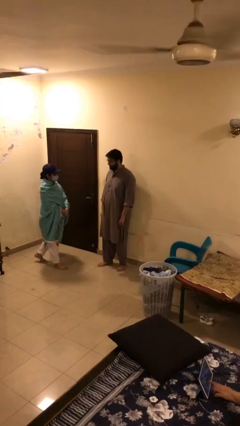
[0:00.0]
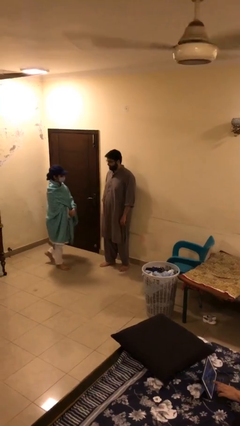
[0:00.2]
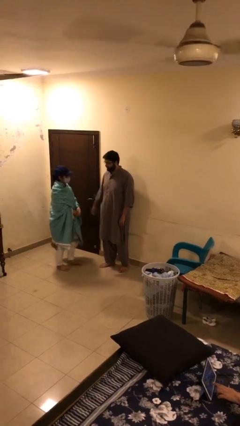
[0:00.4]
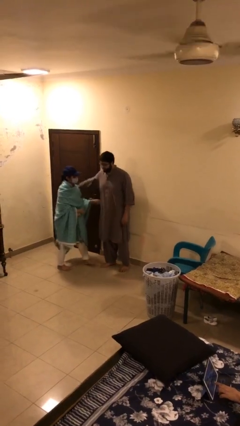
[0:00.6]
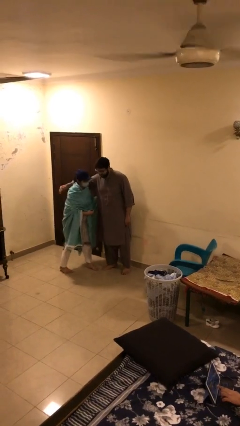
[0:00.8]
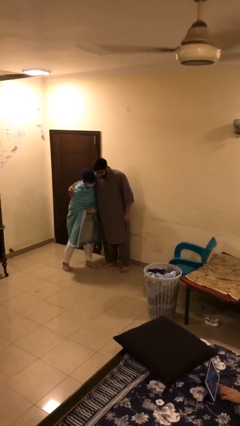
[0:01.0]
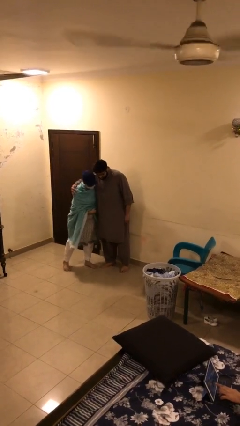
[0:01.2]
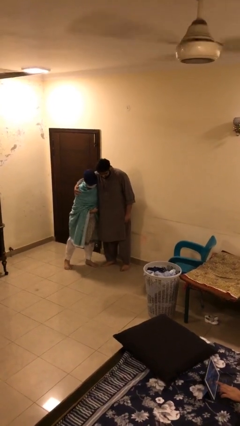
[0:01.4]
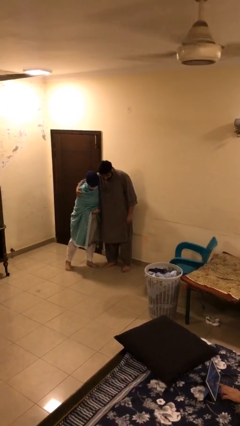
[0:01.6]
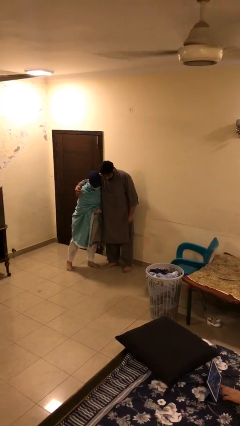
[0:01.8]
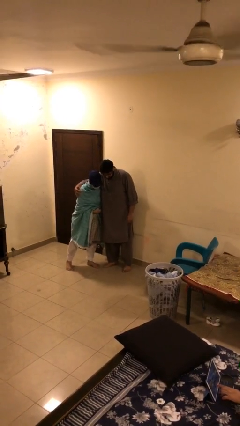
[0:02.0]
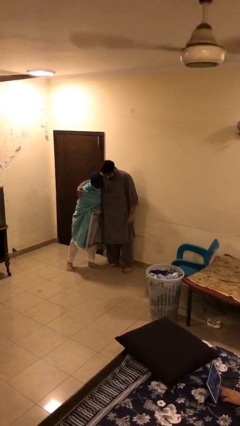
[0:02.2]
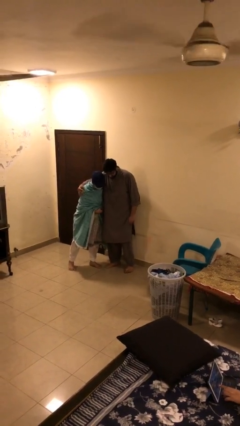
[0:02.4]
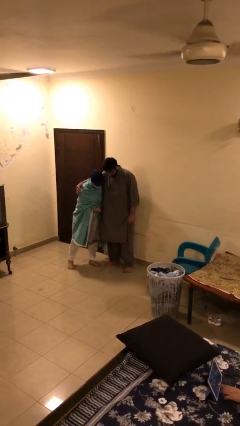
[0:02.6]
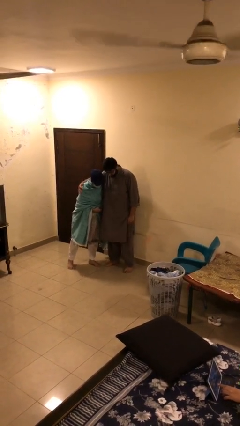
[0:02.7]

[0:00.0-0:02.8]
person embraces person

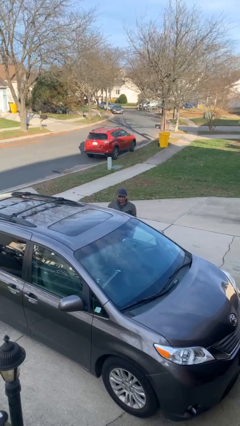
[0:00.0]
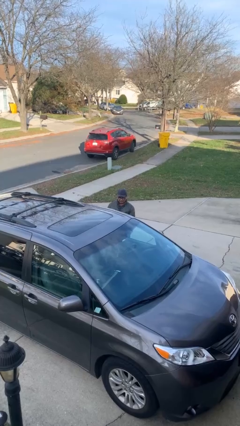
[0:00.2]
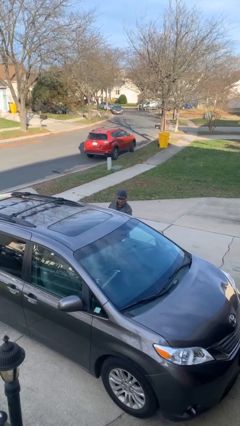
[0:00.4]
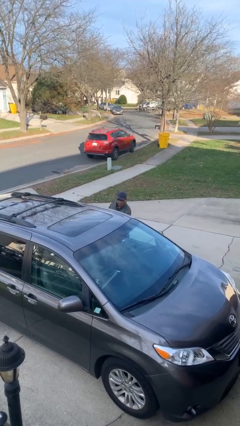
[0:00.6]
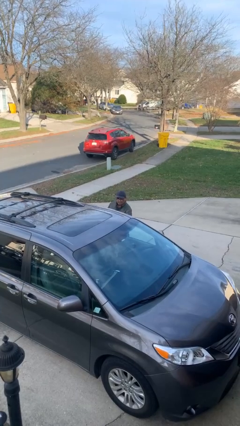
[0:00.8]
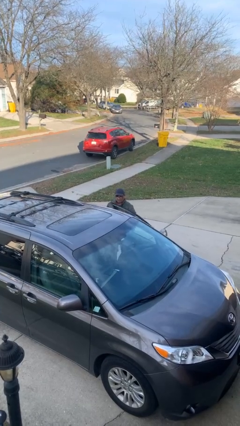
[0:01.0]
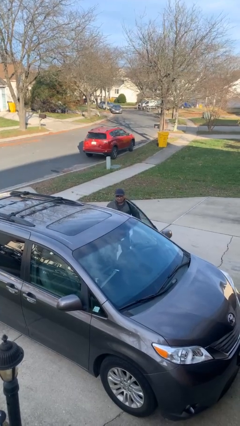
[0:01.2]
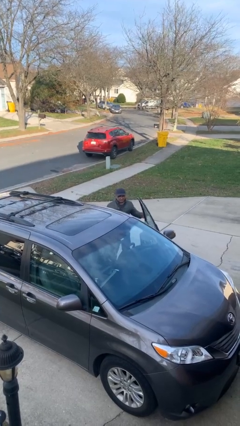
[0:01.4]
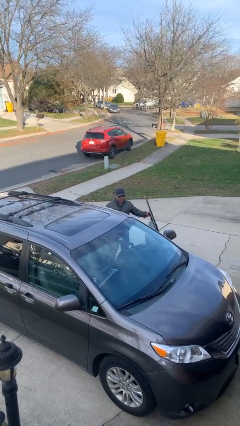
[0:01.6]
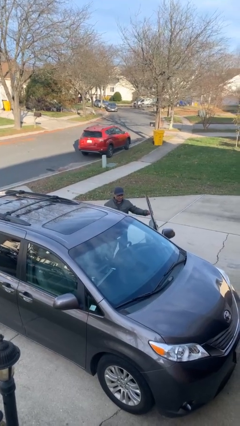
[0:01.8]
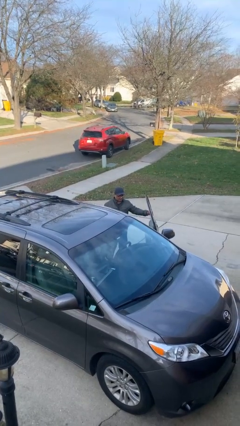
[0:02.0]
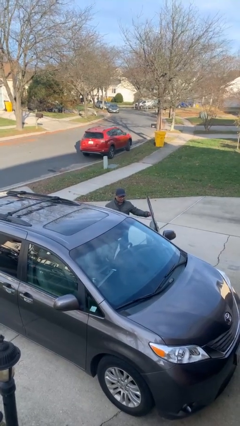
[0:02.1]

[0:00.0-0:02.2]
person opens car door

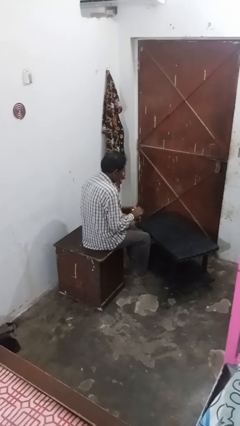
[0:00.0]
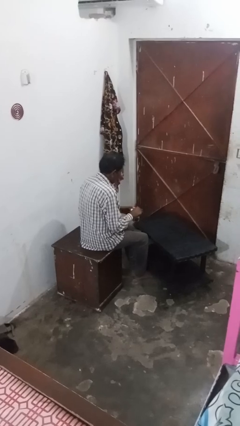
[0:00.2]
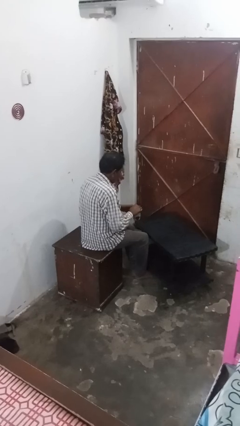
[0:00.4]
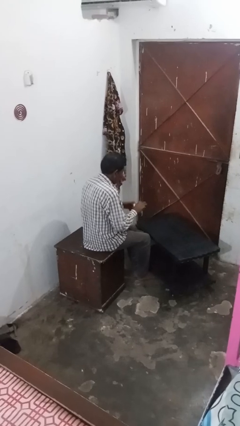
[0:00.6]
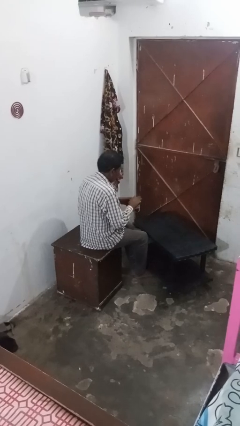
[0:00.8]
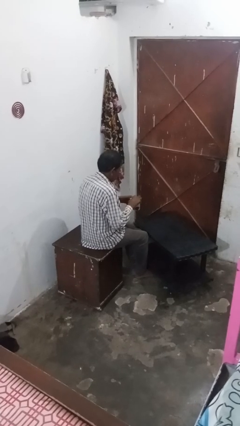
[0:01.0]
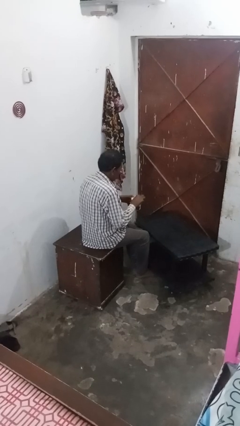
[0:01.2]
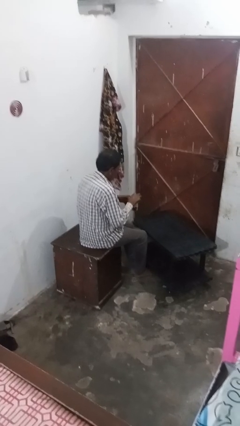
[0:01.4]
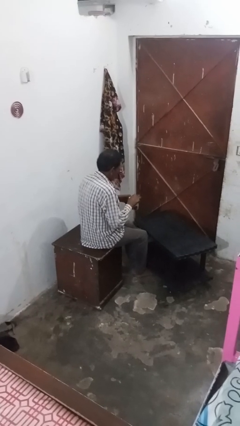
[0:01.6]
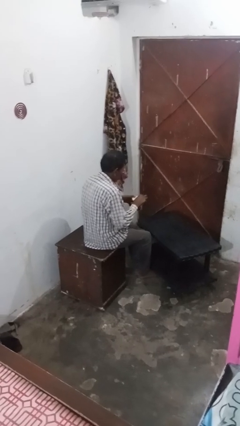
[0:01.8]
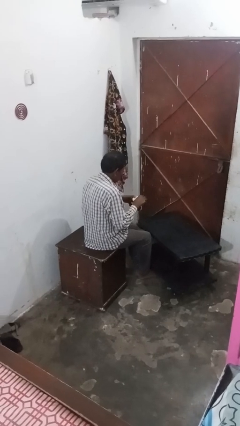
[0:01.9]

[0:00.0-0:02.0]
person stirs mug

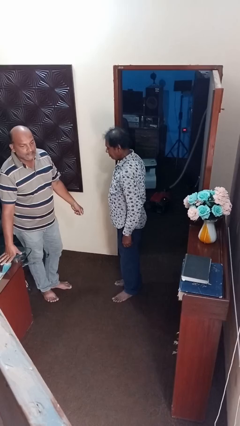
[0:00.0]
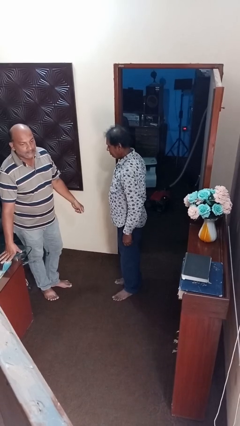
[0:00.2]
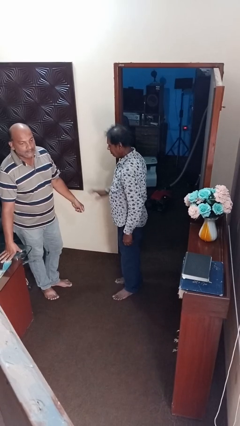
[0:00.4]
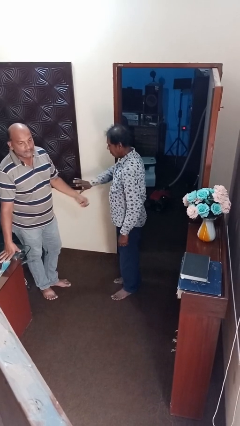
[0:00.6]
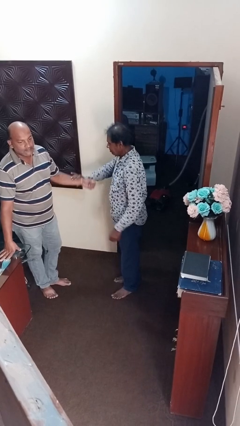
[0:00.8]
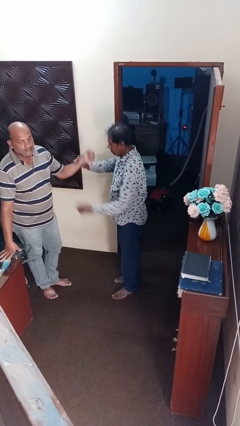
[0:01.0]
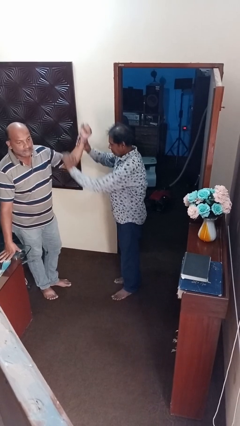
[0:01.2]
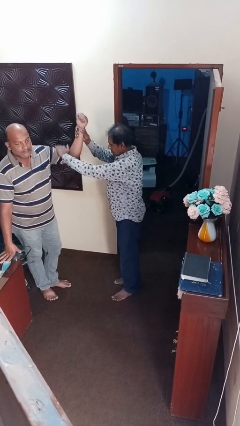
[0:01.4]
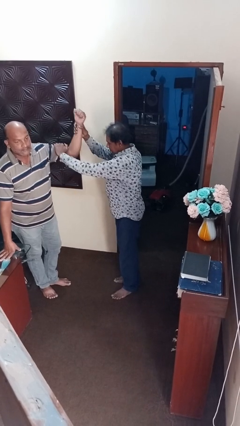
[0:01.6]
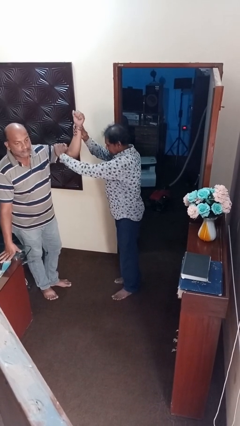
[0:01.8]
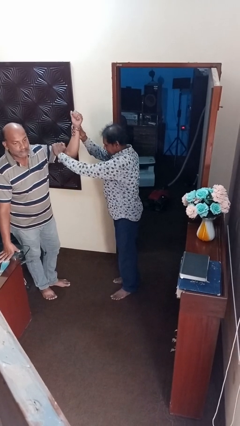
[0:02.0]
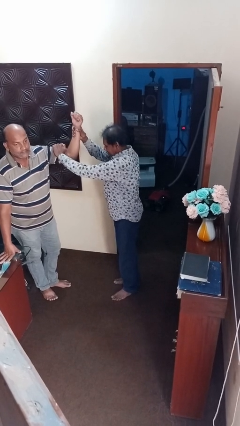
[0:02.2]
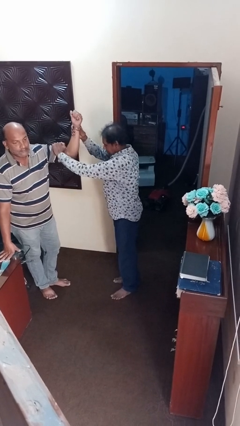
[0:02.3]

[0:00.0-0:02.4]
person grabs person by bicep

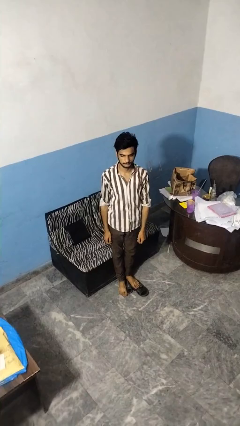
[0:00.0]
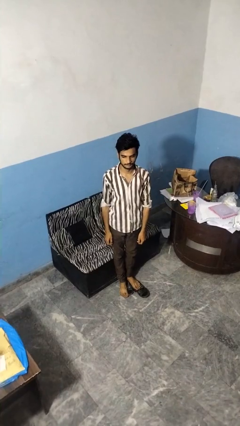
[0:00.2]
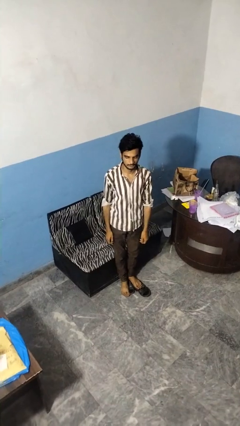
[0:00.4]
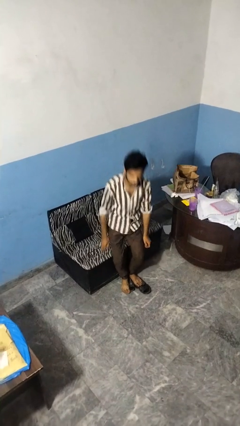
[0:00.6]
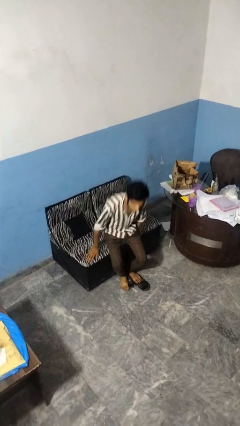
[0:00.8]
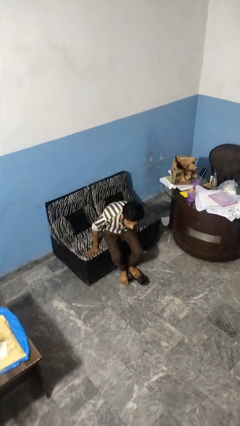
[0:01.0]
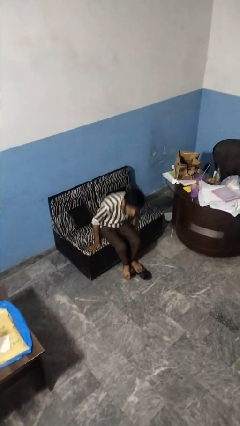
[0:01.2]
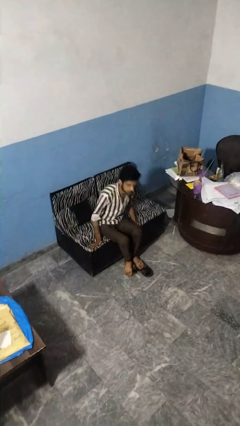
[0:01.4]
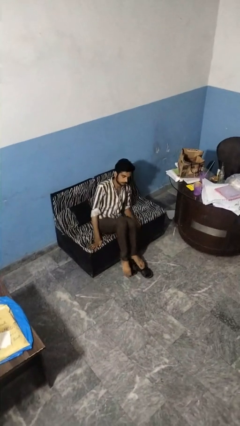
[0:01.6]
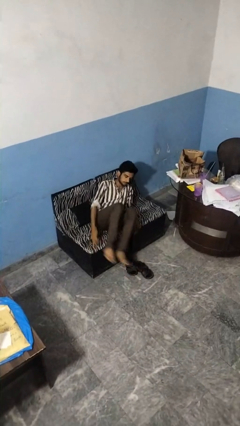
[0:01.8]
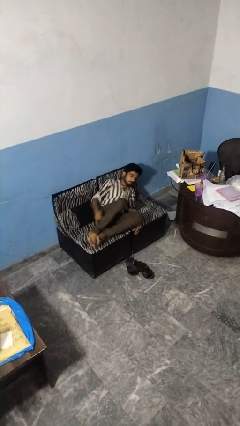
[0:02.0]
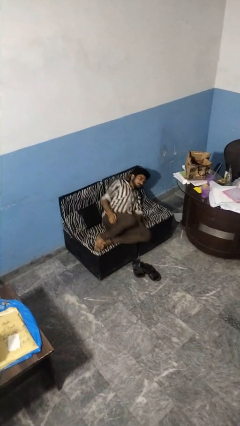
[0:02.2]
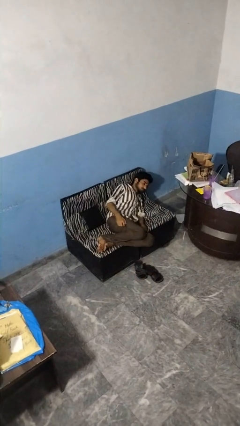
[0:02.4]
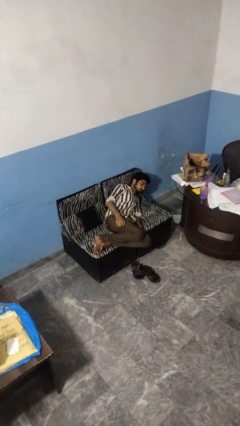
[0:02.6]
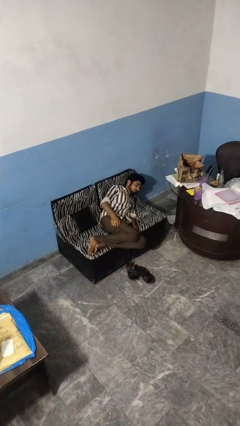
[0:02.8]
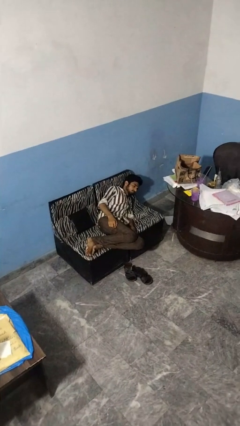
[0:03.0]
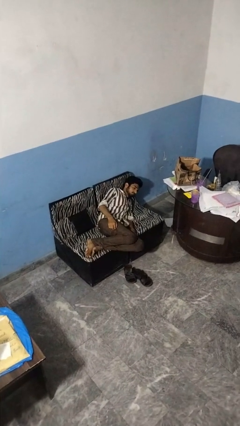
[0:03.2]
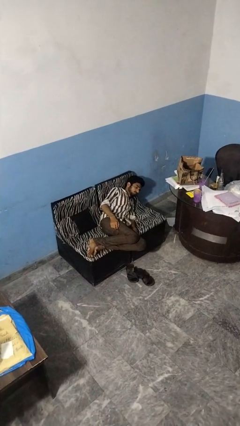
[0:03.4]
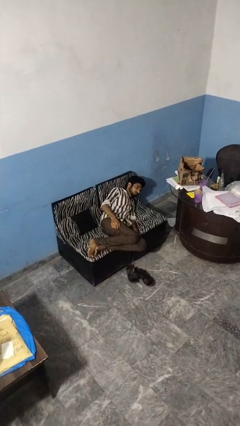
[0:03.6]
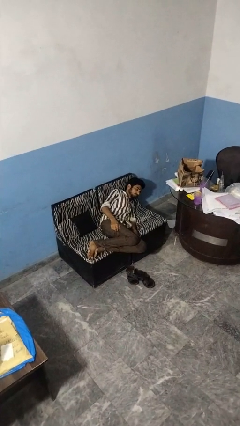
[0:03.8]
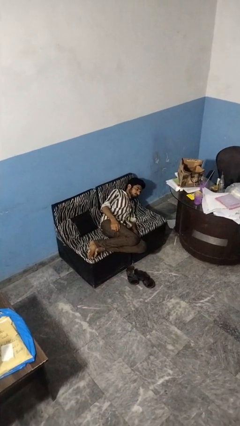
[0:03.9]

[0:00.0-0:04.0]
person lies down on couch

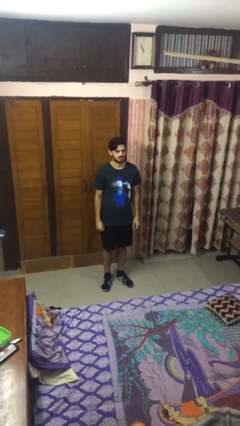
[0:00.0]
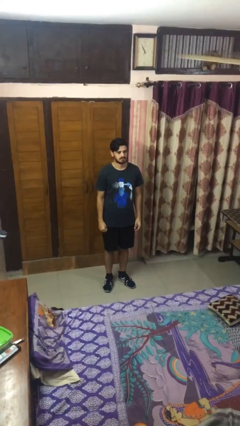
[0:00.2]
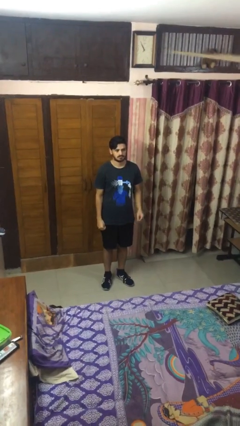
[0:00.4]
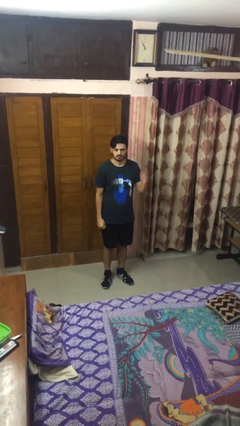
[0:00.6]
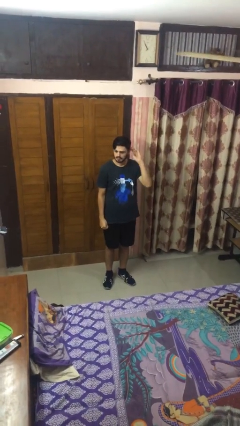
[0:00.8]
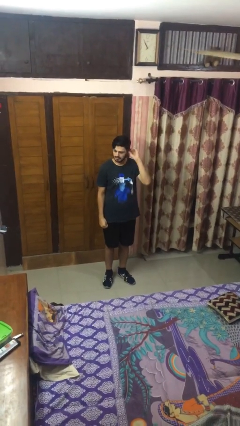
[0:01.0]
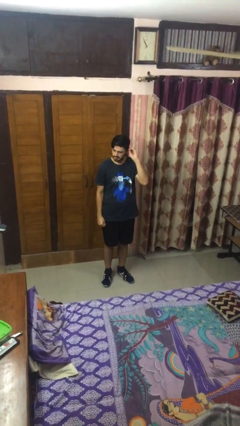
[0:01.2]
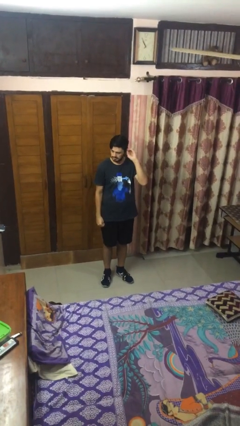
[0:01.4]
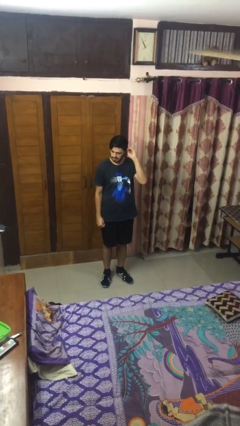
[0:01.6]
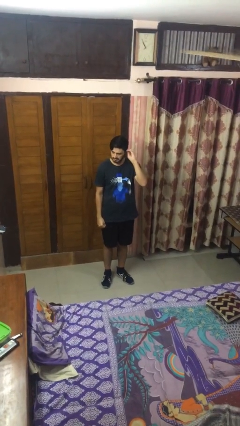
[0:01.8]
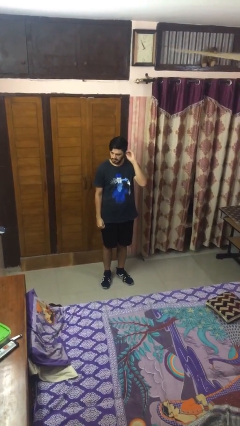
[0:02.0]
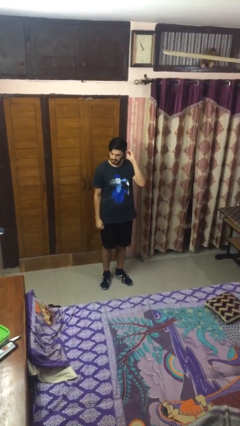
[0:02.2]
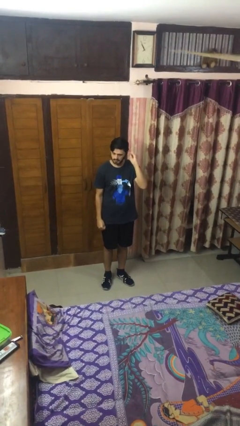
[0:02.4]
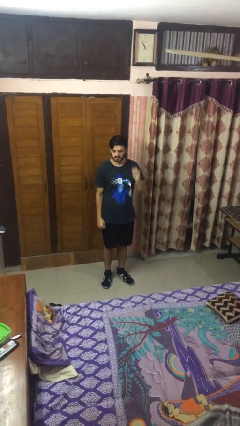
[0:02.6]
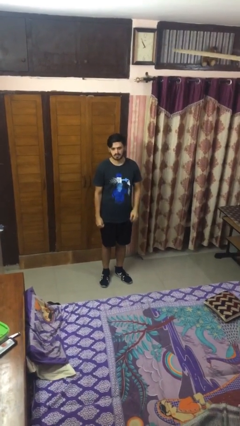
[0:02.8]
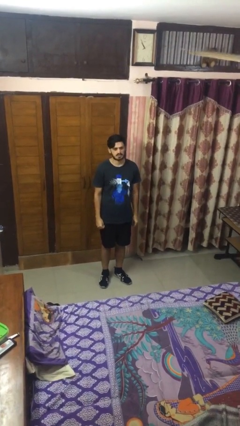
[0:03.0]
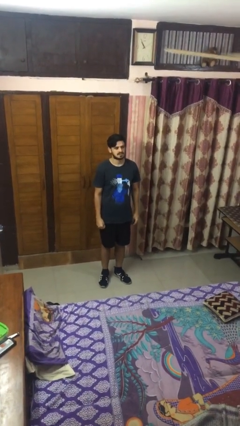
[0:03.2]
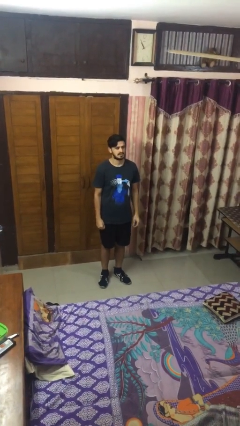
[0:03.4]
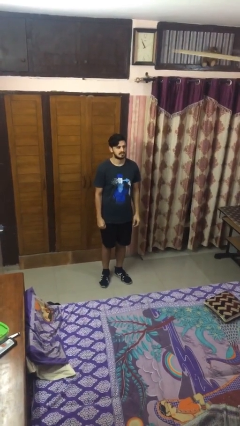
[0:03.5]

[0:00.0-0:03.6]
person touches earlobe

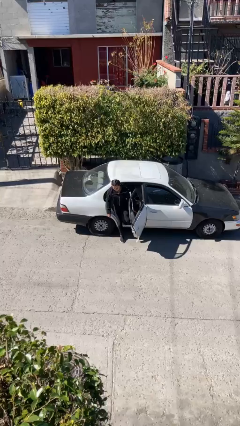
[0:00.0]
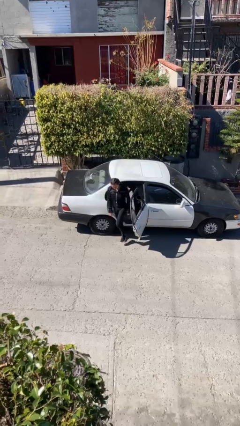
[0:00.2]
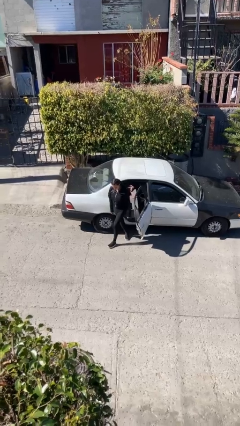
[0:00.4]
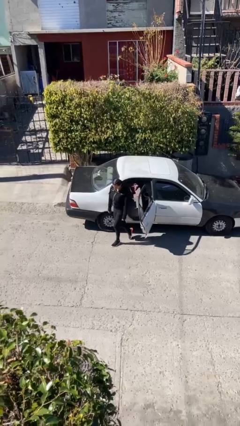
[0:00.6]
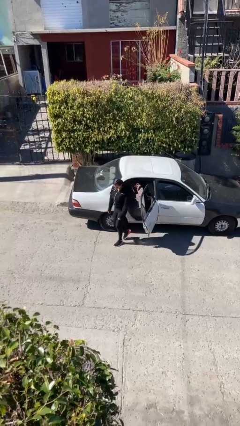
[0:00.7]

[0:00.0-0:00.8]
person exits car
